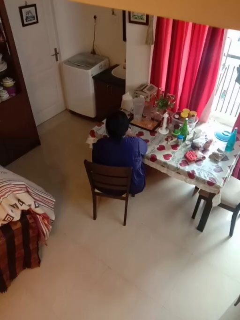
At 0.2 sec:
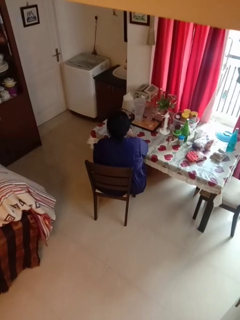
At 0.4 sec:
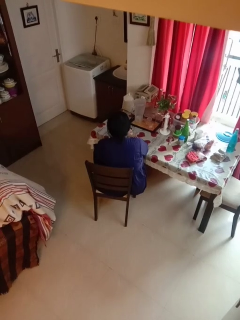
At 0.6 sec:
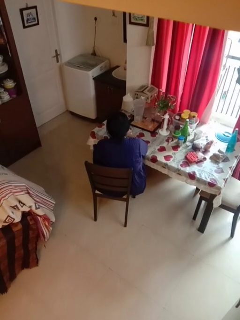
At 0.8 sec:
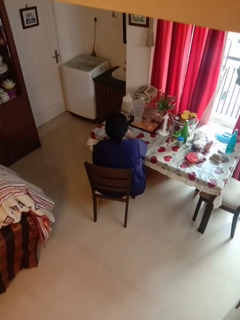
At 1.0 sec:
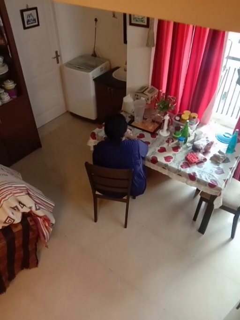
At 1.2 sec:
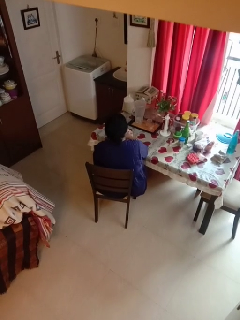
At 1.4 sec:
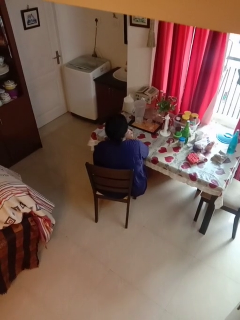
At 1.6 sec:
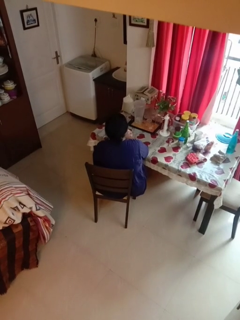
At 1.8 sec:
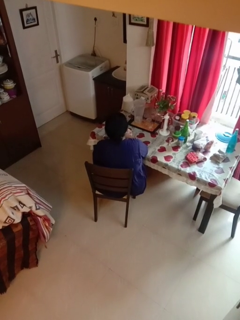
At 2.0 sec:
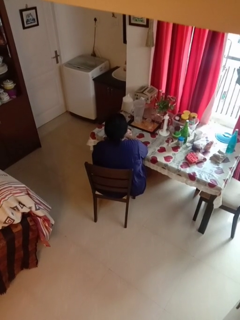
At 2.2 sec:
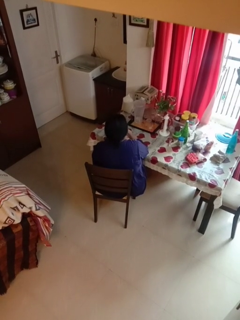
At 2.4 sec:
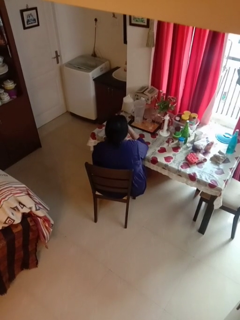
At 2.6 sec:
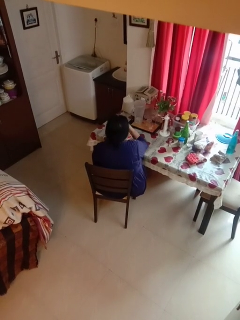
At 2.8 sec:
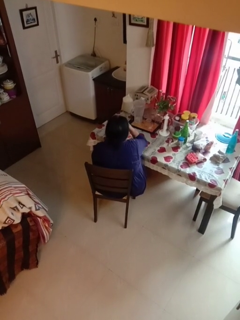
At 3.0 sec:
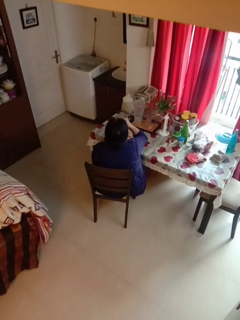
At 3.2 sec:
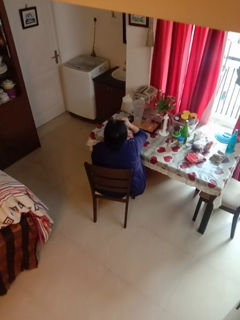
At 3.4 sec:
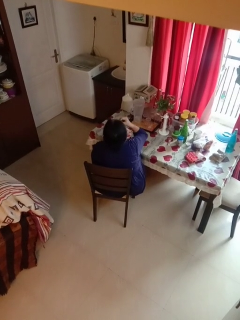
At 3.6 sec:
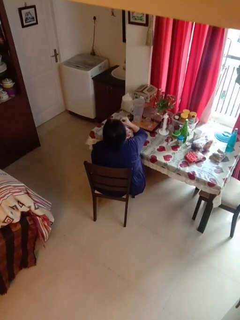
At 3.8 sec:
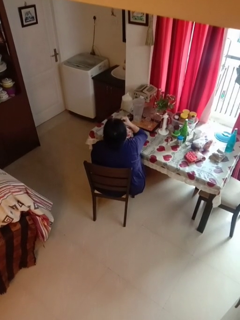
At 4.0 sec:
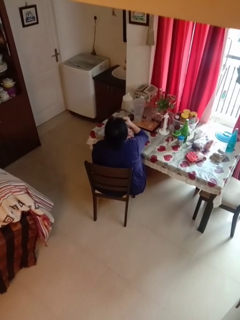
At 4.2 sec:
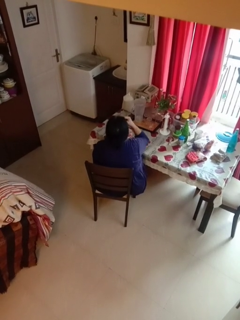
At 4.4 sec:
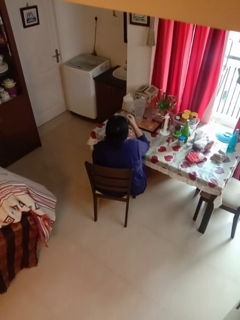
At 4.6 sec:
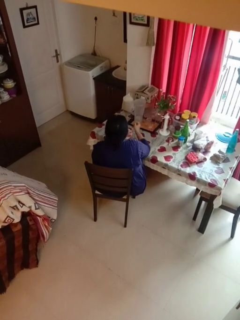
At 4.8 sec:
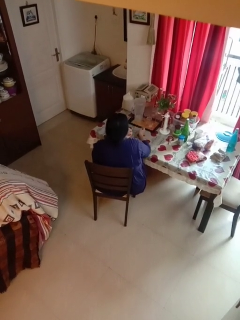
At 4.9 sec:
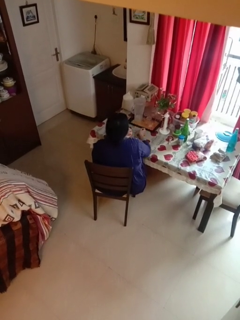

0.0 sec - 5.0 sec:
person eats with hands

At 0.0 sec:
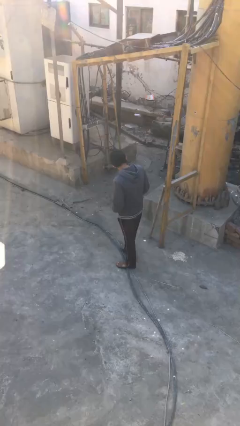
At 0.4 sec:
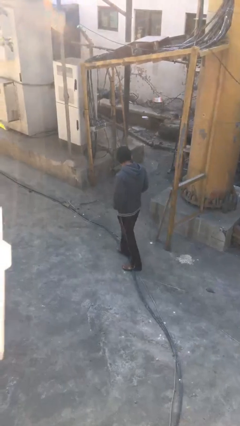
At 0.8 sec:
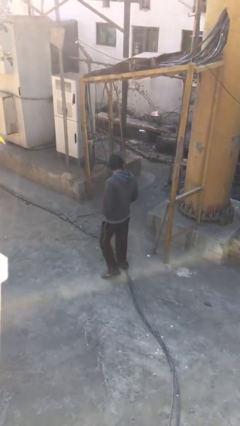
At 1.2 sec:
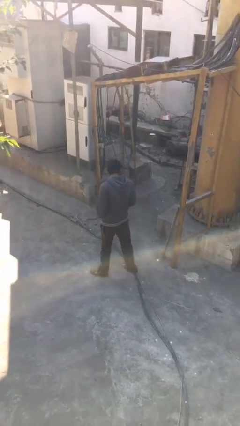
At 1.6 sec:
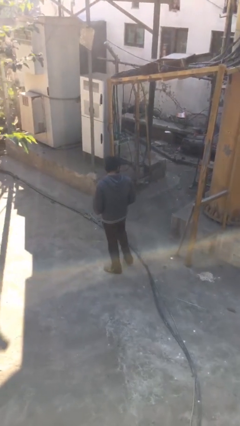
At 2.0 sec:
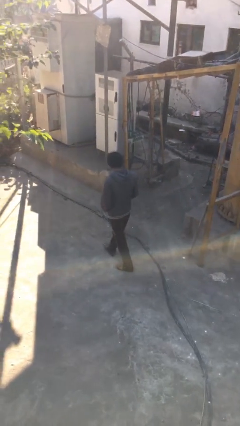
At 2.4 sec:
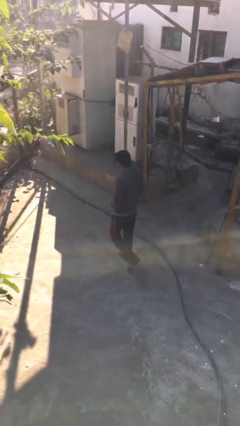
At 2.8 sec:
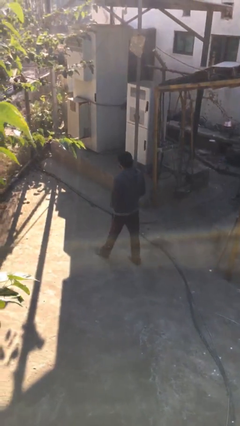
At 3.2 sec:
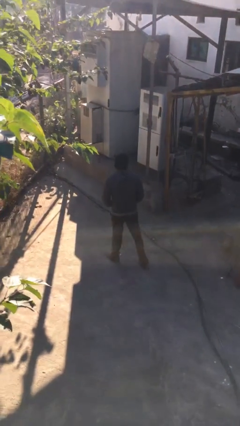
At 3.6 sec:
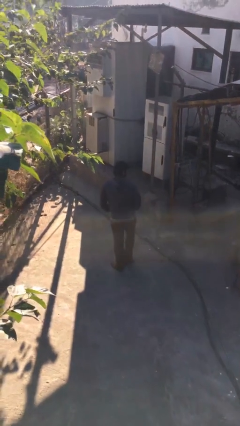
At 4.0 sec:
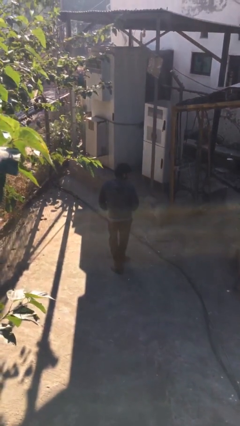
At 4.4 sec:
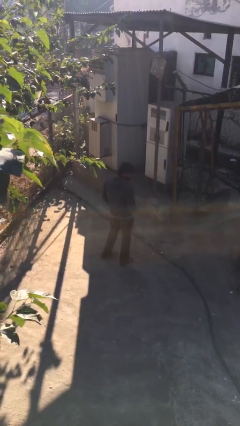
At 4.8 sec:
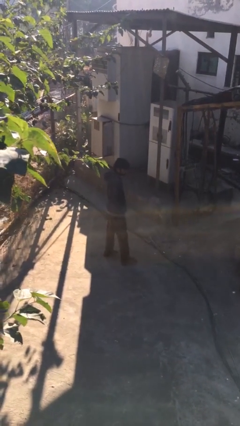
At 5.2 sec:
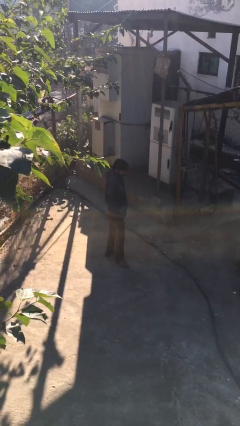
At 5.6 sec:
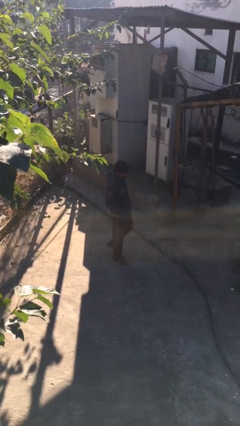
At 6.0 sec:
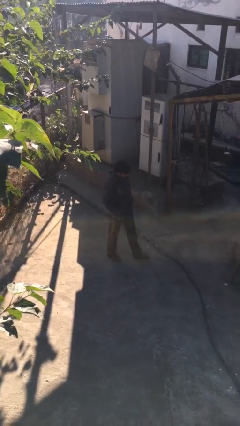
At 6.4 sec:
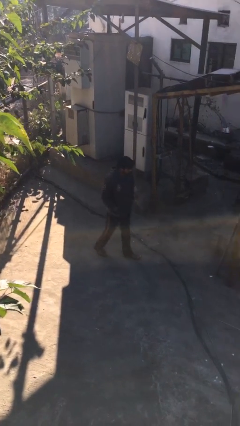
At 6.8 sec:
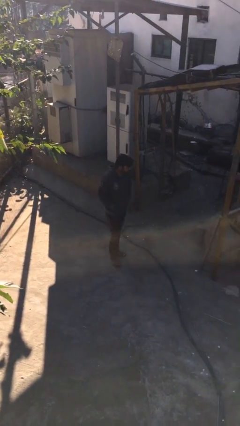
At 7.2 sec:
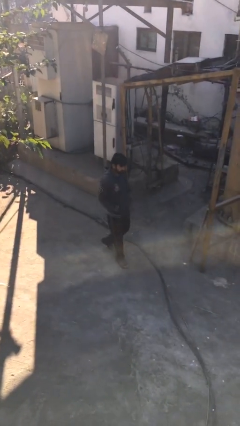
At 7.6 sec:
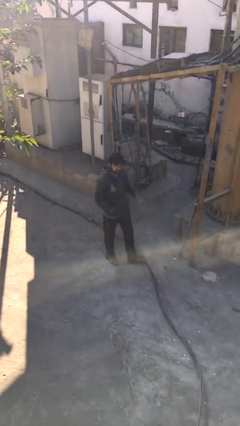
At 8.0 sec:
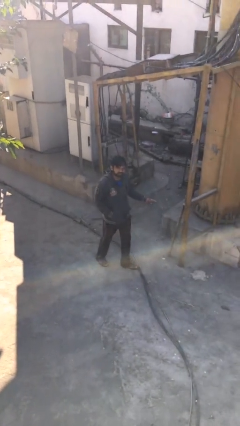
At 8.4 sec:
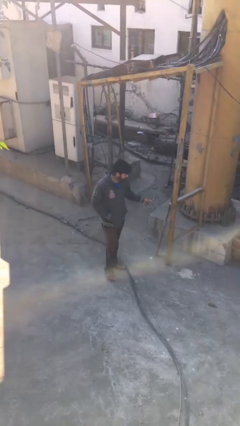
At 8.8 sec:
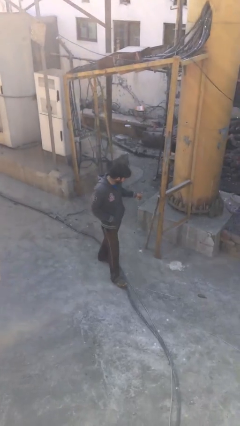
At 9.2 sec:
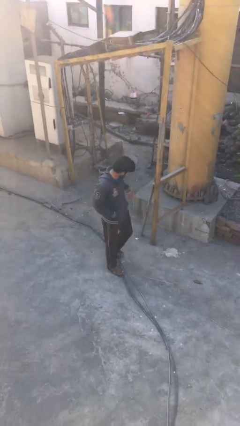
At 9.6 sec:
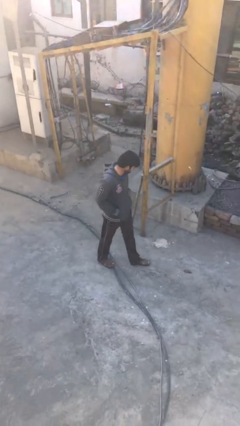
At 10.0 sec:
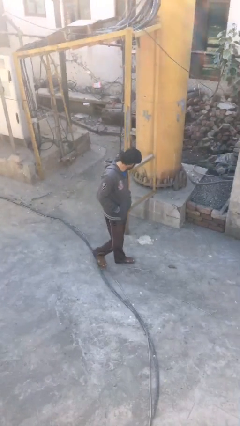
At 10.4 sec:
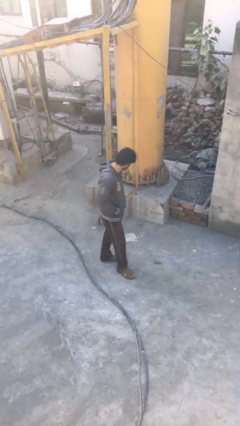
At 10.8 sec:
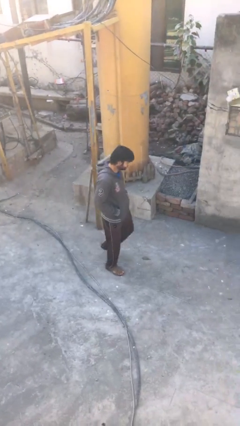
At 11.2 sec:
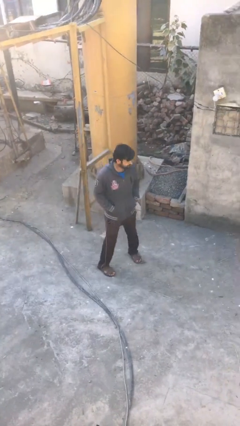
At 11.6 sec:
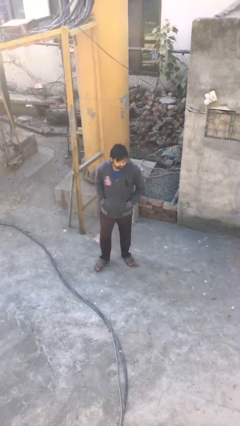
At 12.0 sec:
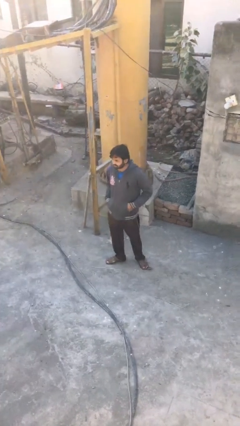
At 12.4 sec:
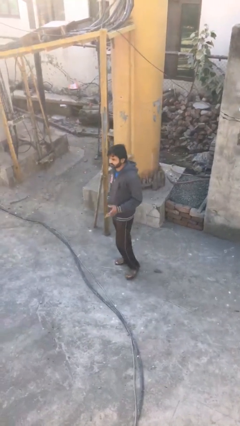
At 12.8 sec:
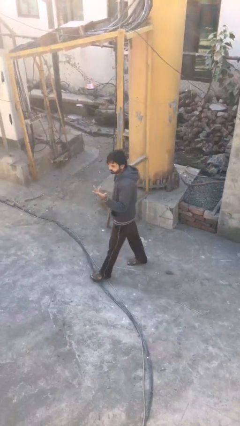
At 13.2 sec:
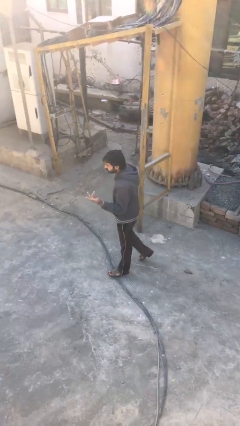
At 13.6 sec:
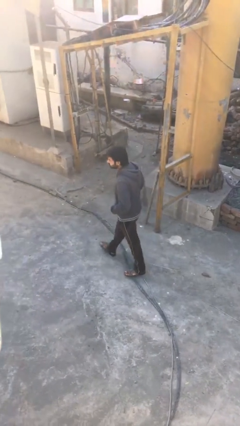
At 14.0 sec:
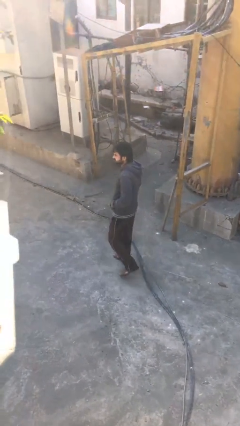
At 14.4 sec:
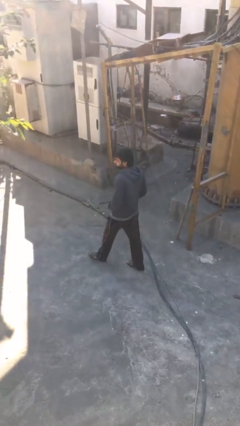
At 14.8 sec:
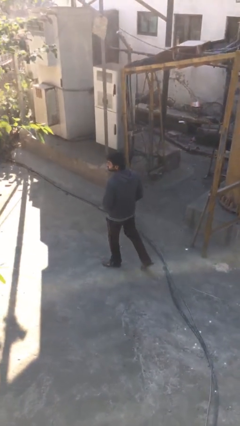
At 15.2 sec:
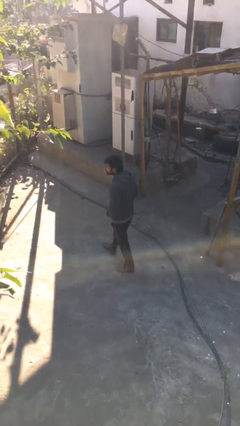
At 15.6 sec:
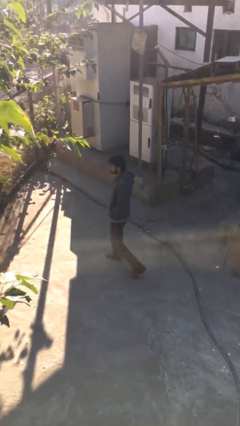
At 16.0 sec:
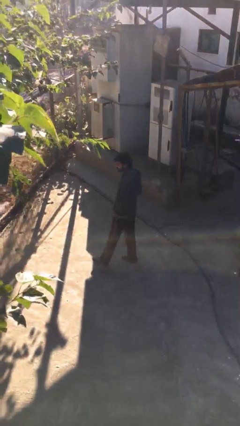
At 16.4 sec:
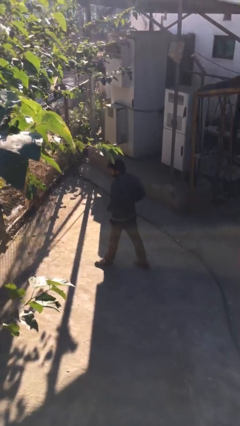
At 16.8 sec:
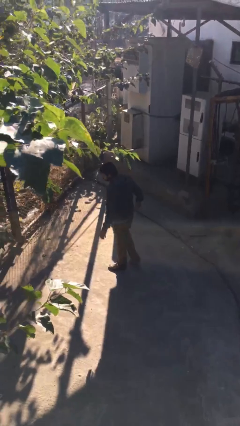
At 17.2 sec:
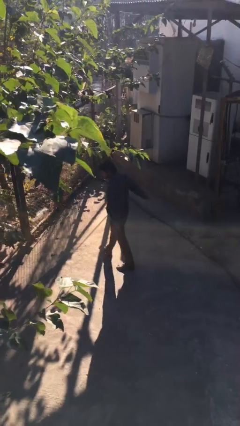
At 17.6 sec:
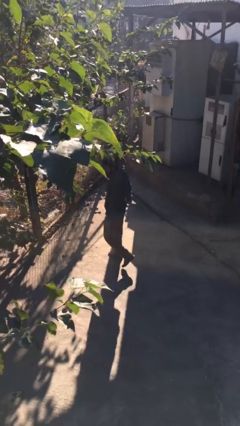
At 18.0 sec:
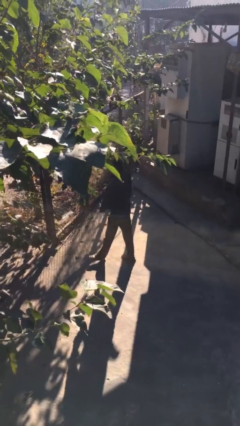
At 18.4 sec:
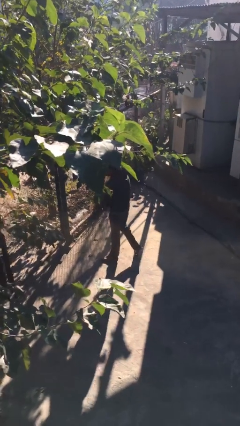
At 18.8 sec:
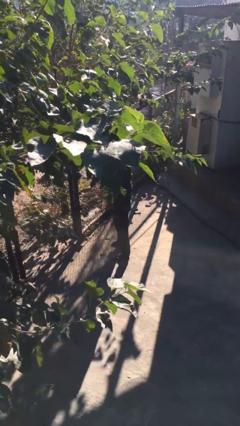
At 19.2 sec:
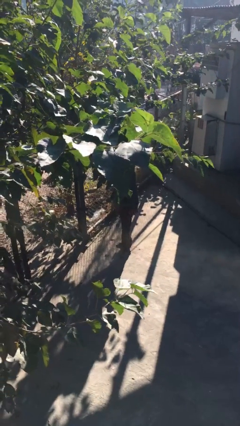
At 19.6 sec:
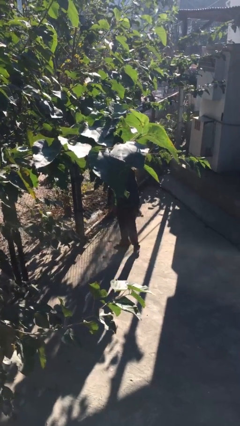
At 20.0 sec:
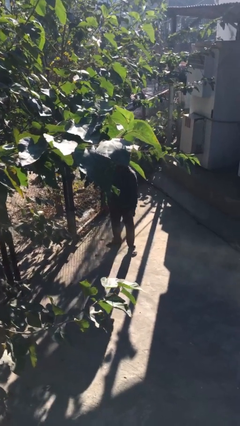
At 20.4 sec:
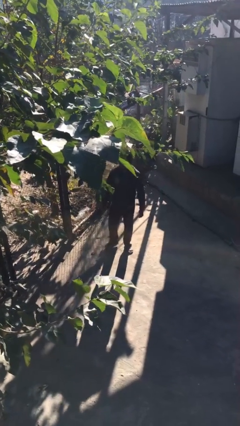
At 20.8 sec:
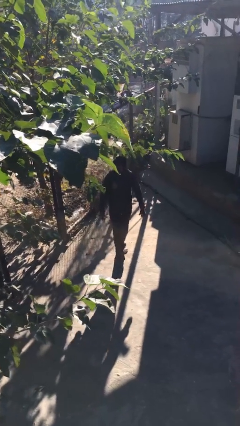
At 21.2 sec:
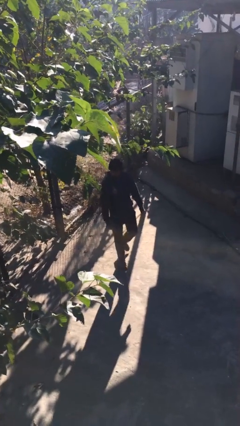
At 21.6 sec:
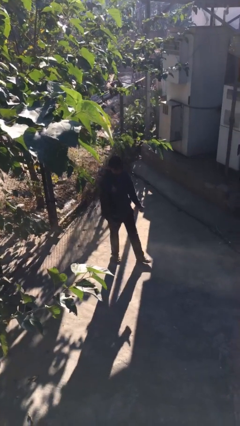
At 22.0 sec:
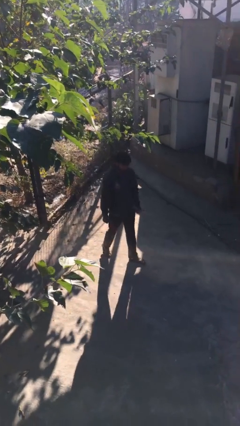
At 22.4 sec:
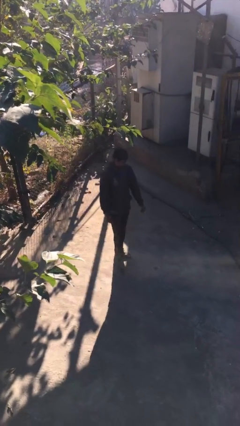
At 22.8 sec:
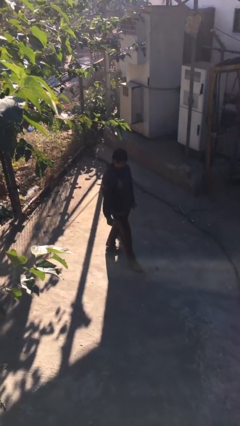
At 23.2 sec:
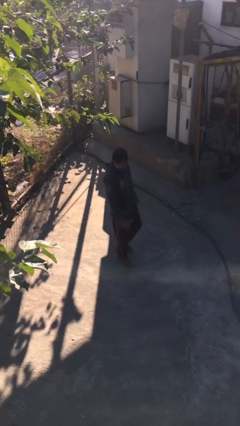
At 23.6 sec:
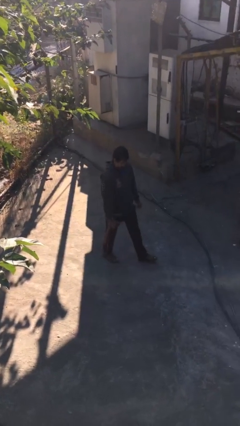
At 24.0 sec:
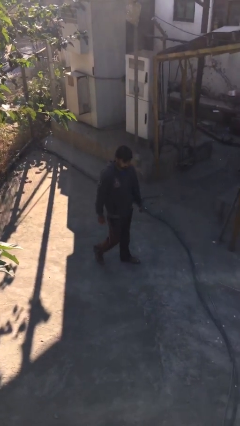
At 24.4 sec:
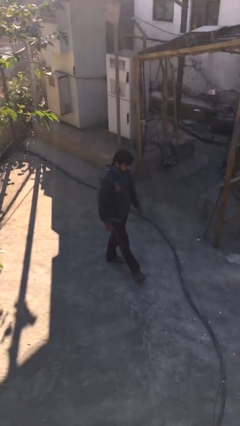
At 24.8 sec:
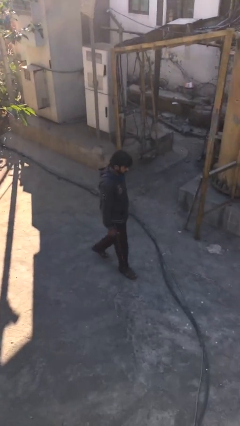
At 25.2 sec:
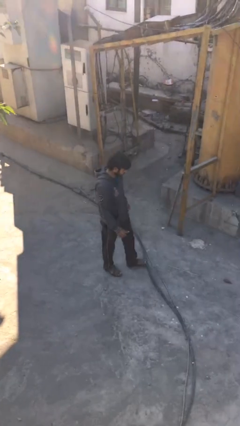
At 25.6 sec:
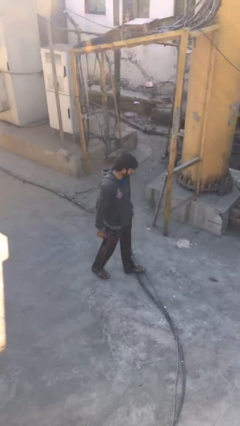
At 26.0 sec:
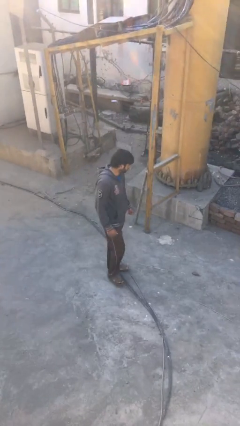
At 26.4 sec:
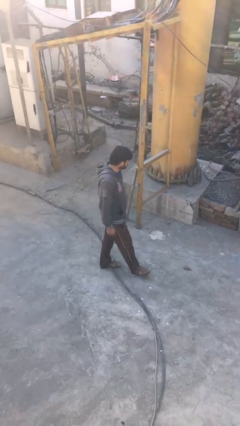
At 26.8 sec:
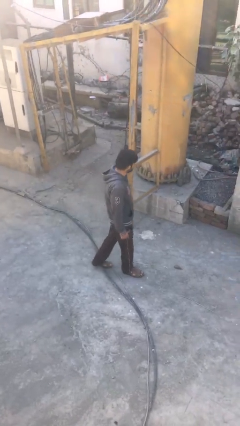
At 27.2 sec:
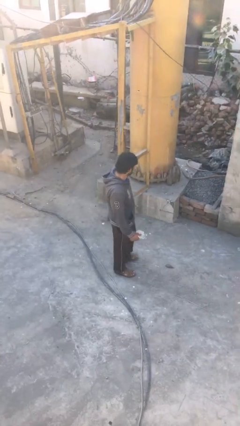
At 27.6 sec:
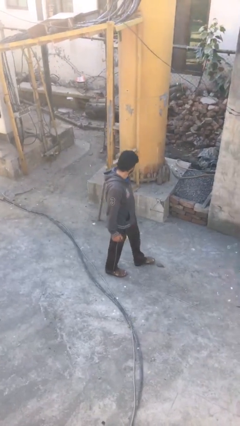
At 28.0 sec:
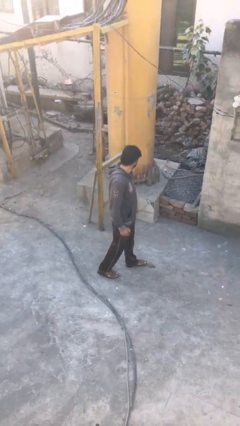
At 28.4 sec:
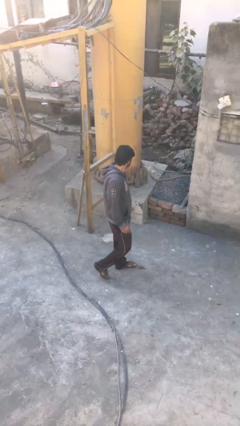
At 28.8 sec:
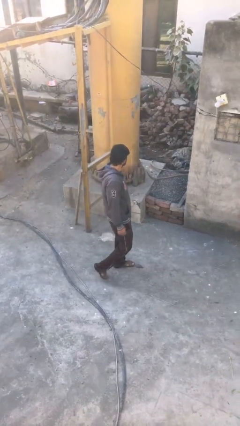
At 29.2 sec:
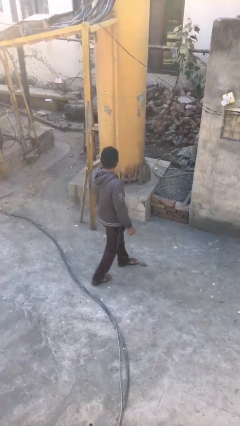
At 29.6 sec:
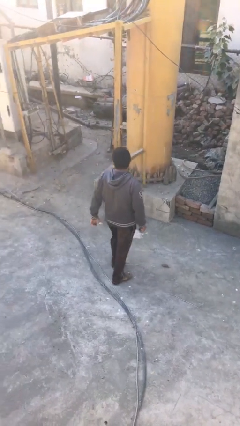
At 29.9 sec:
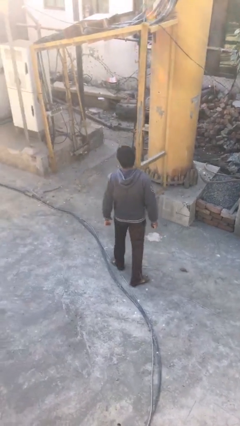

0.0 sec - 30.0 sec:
person walks
